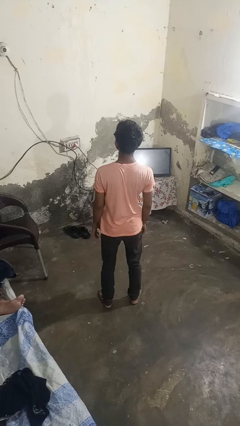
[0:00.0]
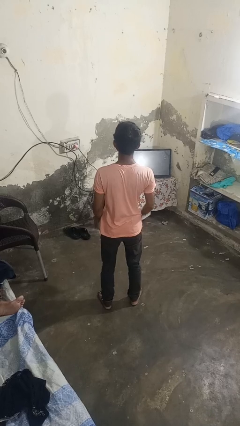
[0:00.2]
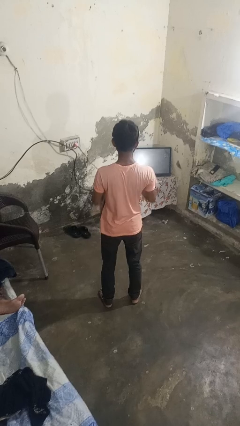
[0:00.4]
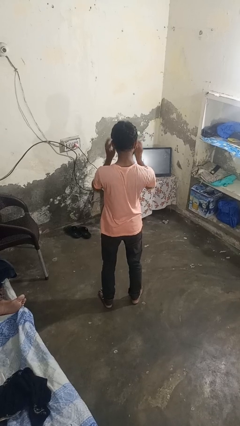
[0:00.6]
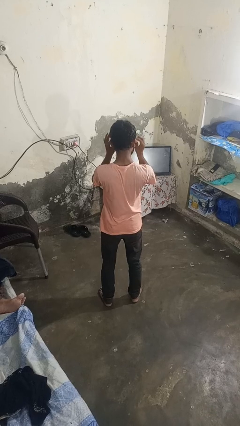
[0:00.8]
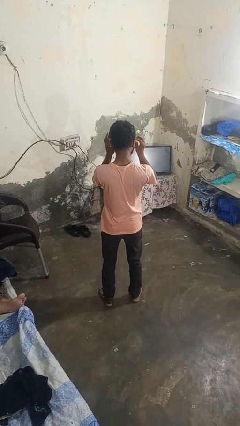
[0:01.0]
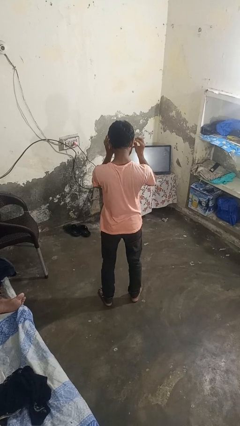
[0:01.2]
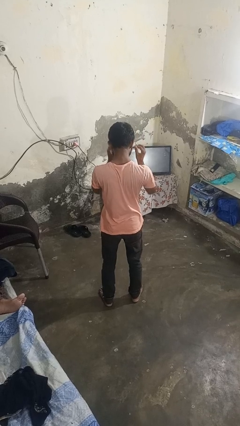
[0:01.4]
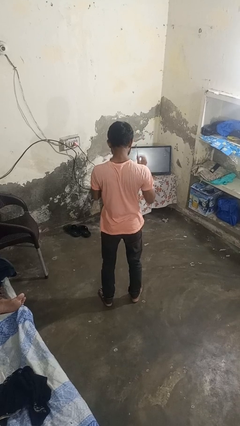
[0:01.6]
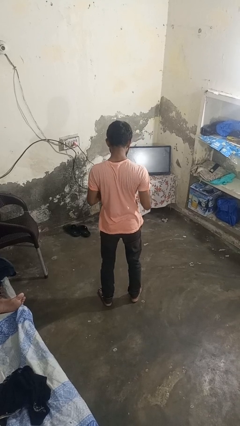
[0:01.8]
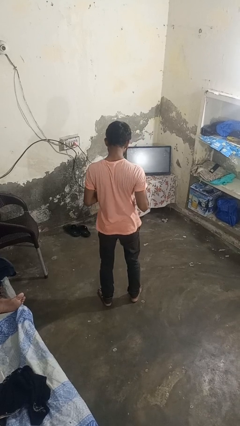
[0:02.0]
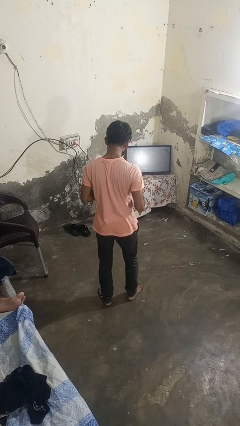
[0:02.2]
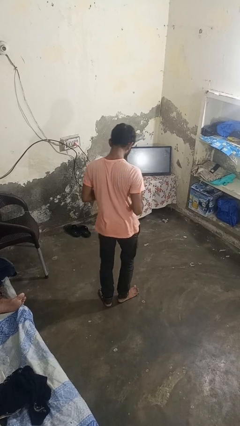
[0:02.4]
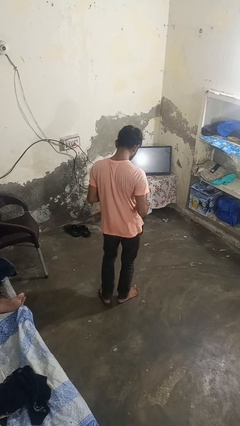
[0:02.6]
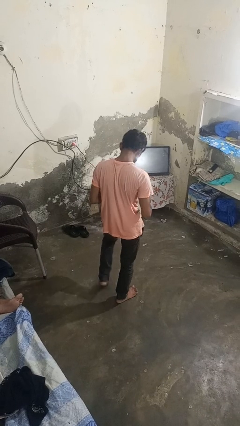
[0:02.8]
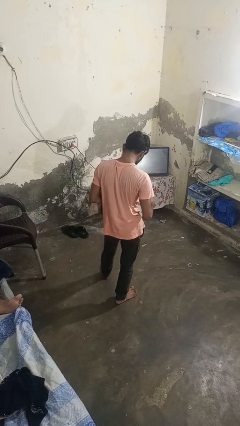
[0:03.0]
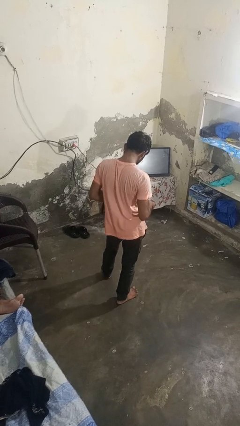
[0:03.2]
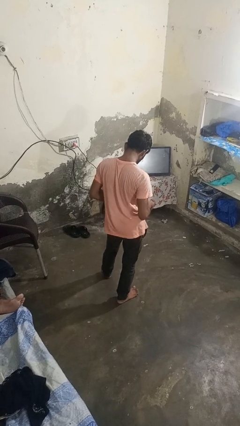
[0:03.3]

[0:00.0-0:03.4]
person takes off glasses

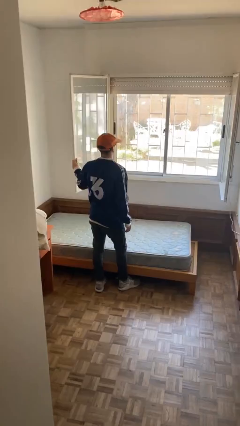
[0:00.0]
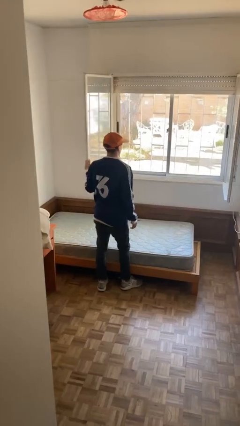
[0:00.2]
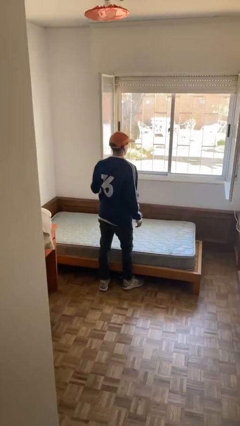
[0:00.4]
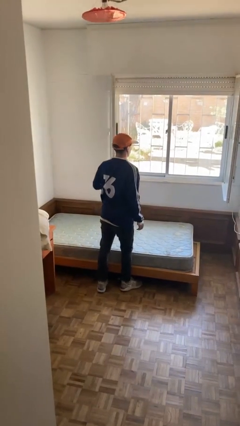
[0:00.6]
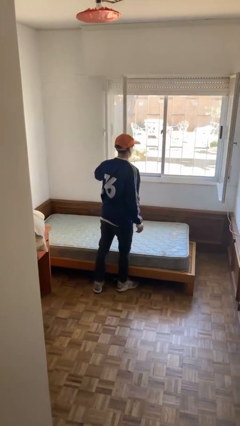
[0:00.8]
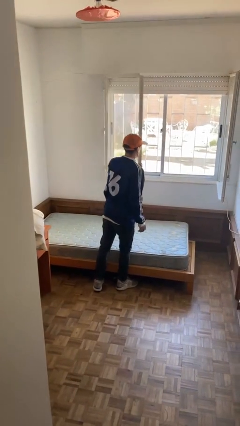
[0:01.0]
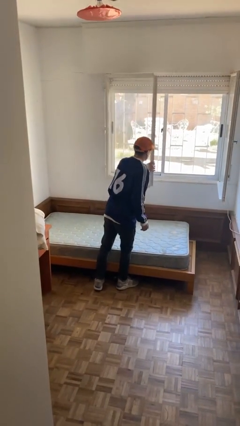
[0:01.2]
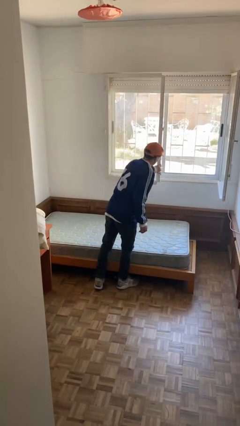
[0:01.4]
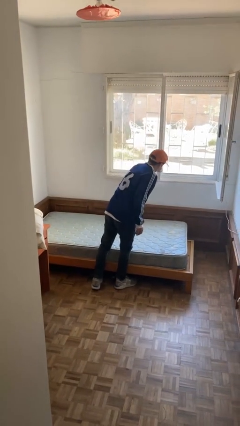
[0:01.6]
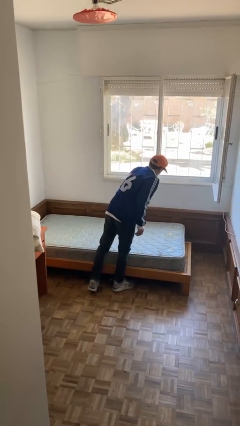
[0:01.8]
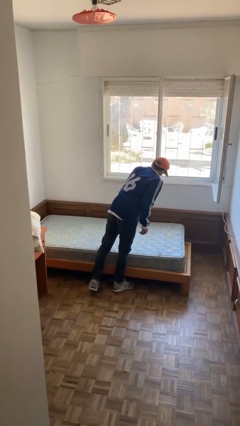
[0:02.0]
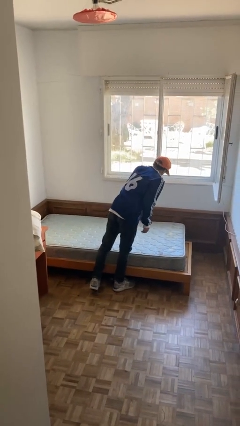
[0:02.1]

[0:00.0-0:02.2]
person closes home window

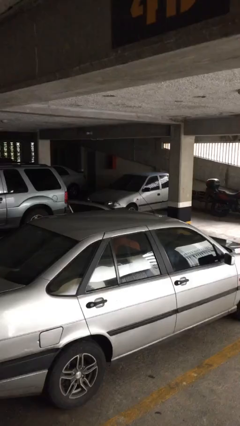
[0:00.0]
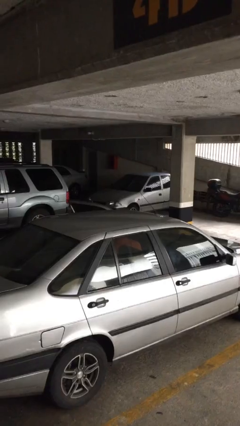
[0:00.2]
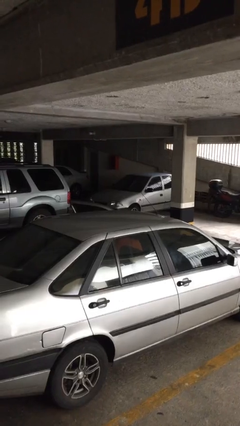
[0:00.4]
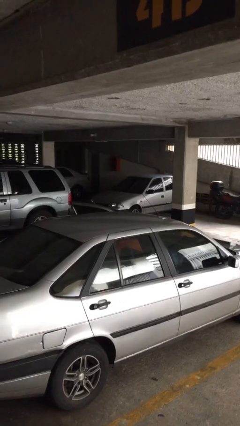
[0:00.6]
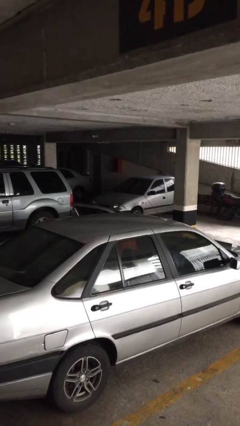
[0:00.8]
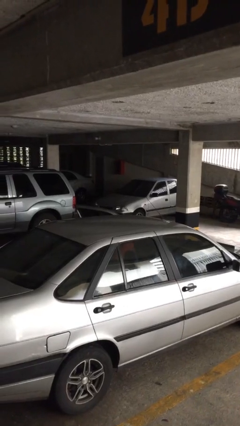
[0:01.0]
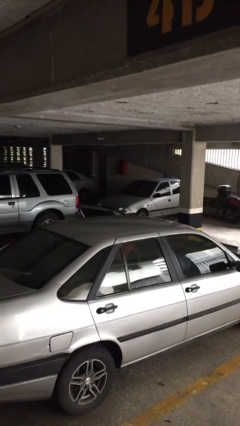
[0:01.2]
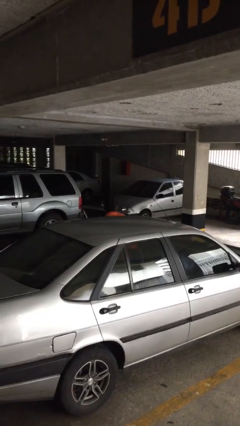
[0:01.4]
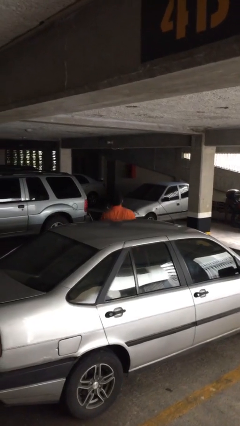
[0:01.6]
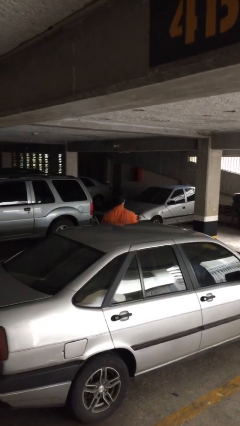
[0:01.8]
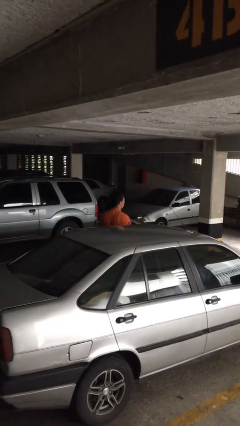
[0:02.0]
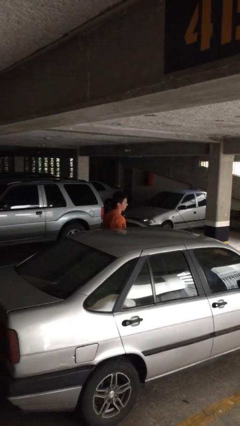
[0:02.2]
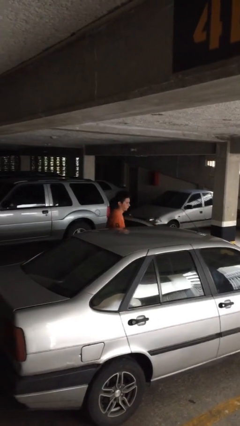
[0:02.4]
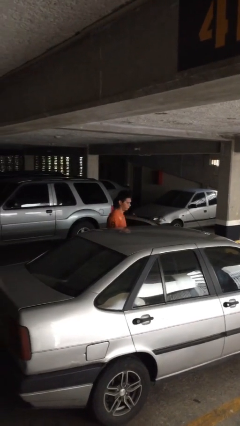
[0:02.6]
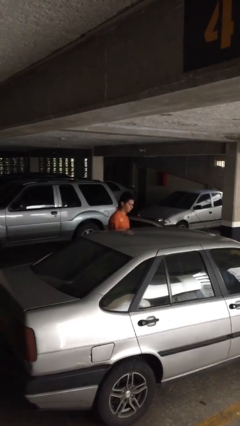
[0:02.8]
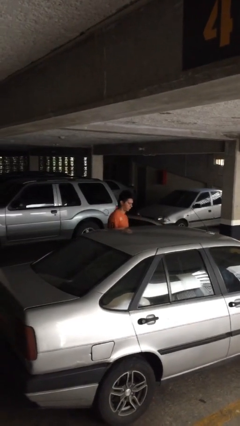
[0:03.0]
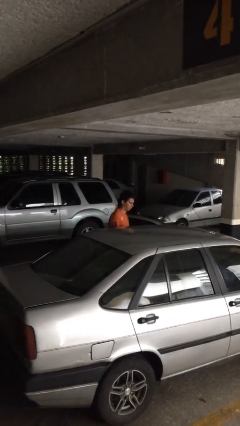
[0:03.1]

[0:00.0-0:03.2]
person exits scene through structure

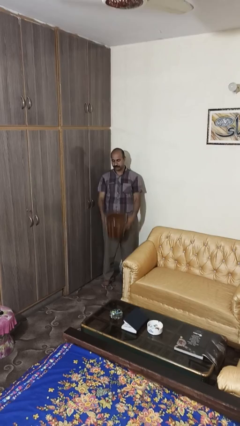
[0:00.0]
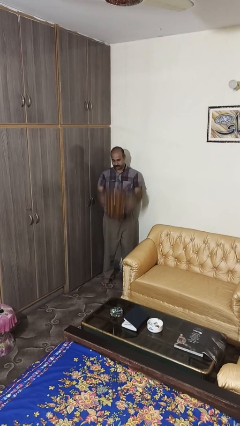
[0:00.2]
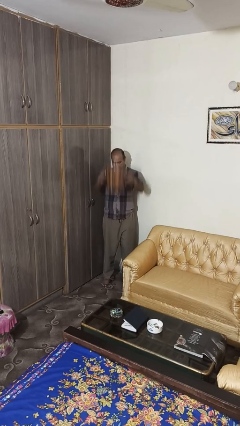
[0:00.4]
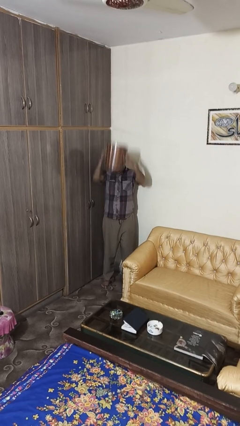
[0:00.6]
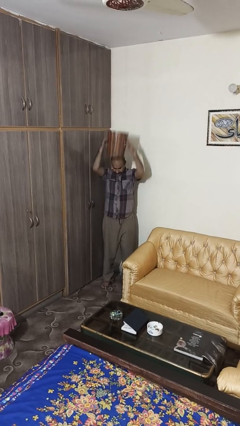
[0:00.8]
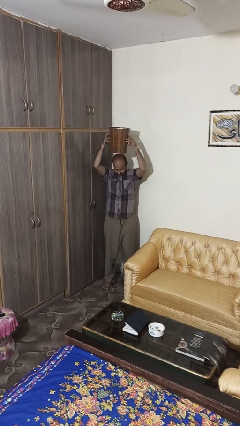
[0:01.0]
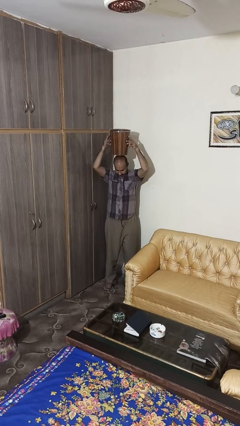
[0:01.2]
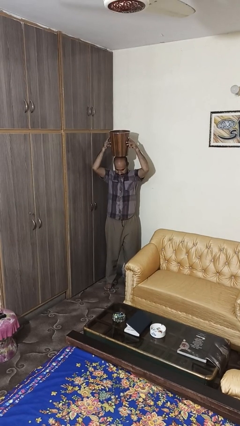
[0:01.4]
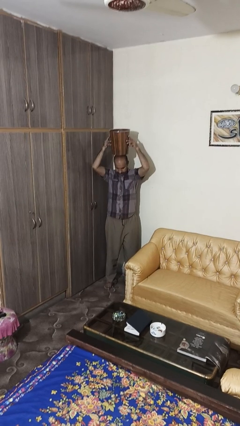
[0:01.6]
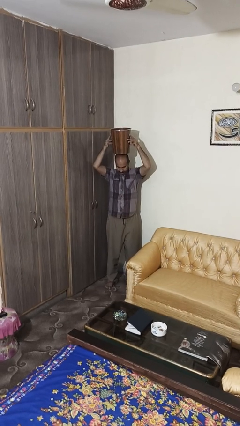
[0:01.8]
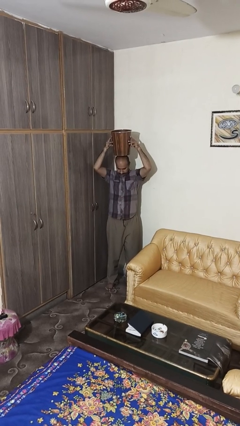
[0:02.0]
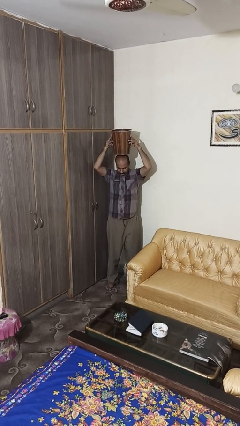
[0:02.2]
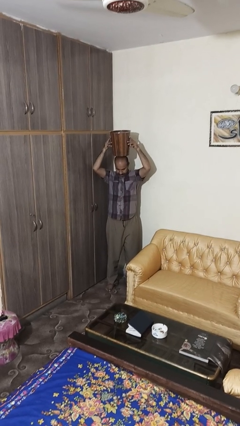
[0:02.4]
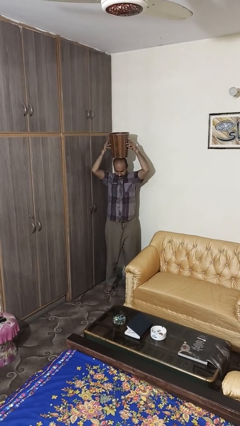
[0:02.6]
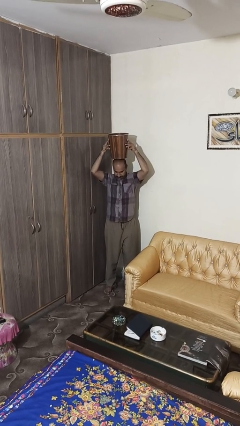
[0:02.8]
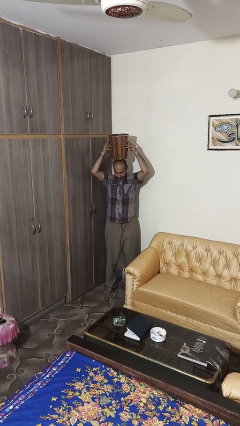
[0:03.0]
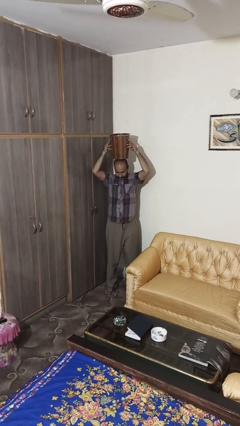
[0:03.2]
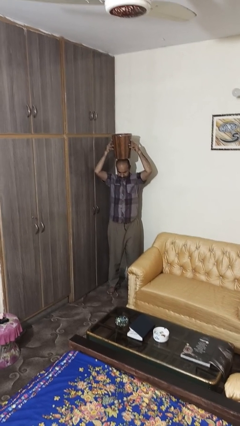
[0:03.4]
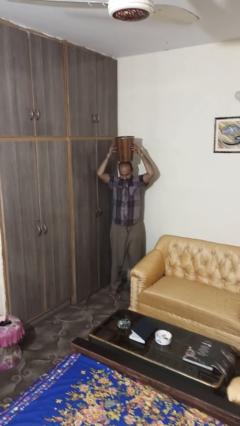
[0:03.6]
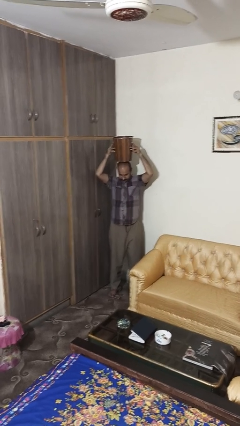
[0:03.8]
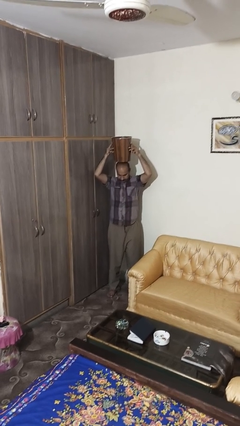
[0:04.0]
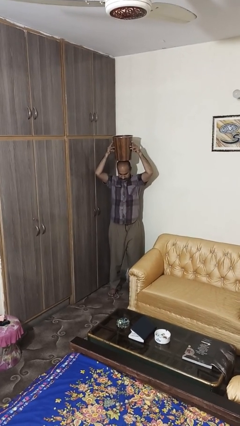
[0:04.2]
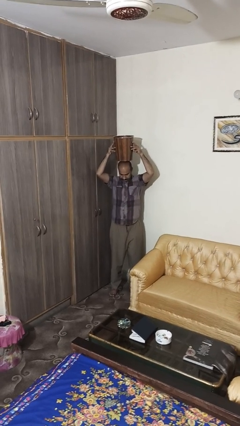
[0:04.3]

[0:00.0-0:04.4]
person holds object above head

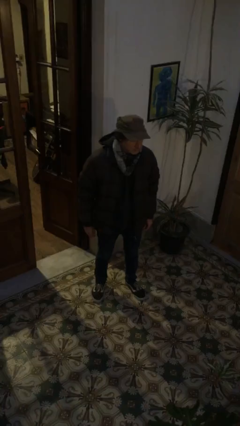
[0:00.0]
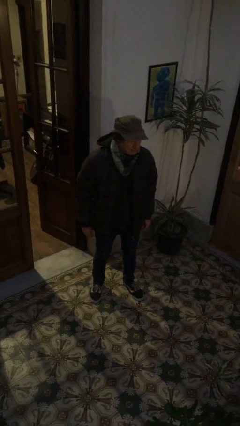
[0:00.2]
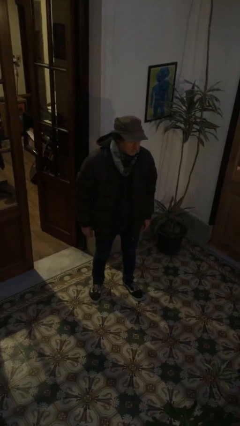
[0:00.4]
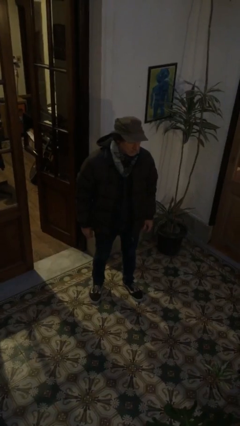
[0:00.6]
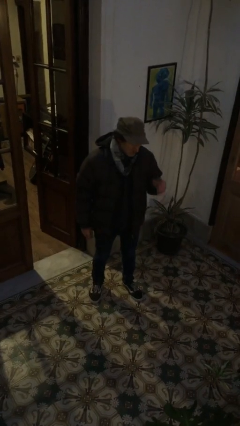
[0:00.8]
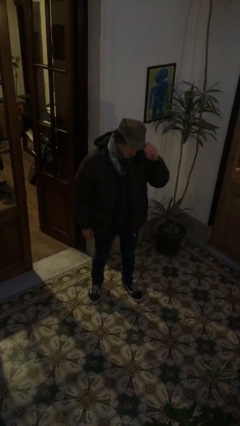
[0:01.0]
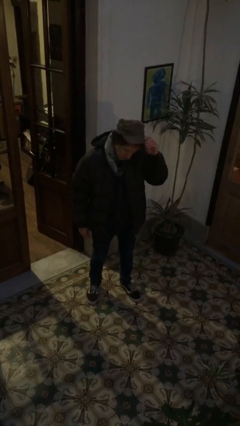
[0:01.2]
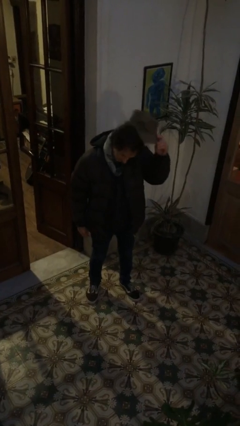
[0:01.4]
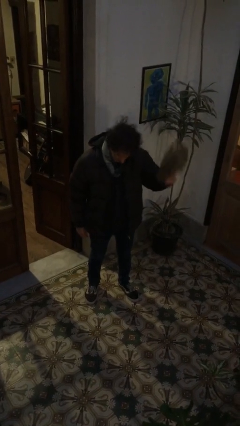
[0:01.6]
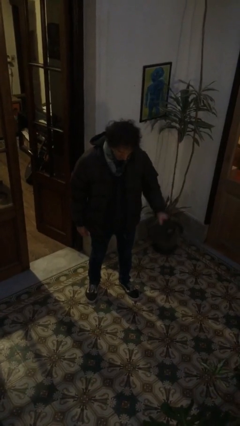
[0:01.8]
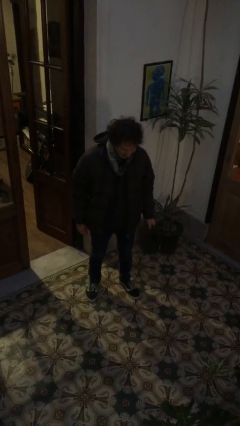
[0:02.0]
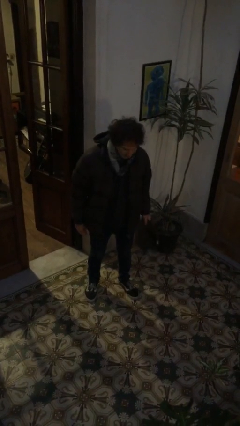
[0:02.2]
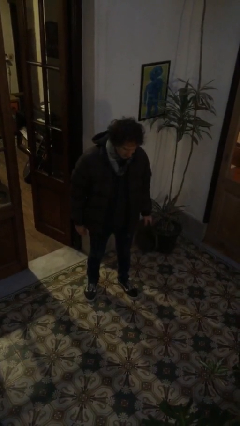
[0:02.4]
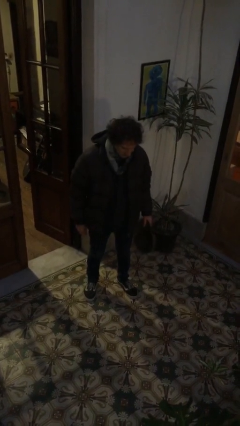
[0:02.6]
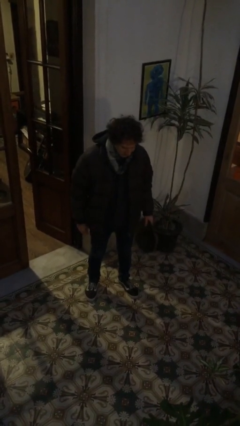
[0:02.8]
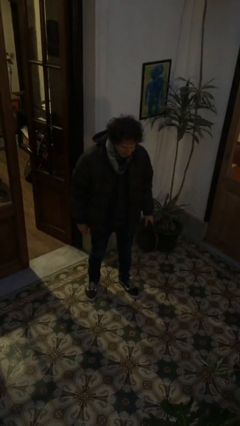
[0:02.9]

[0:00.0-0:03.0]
person takes off hat

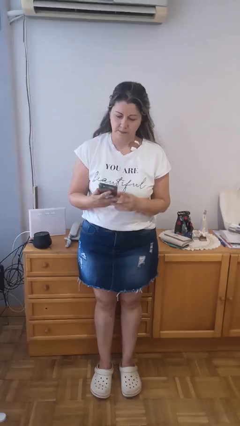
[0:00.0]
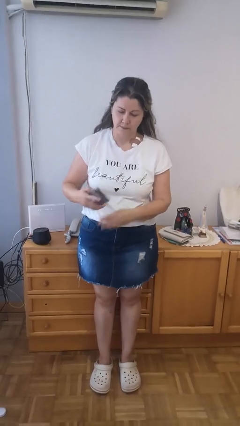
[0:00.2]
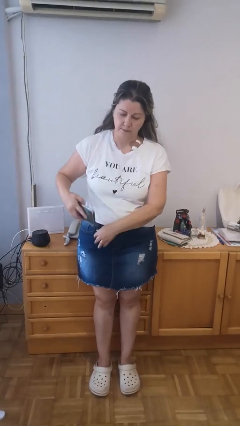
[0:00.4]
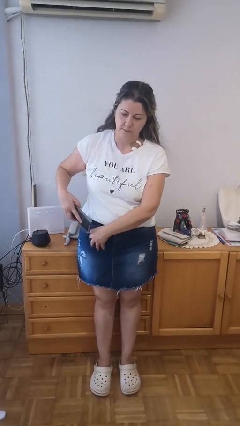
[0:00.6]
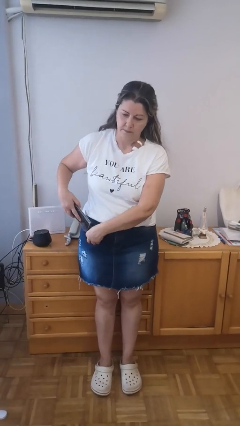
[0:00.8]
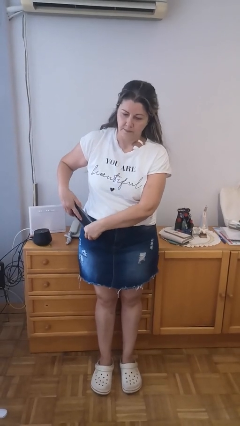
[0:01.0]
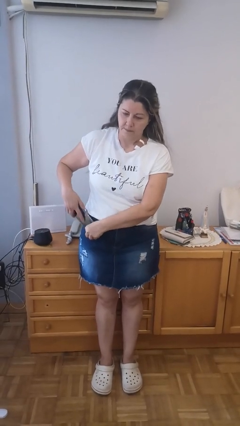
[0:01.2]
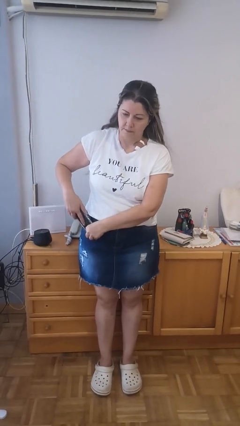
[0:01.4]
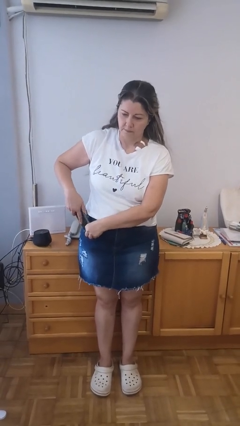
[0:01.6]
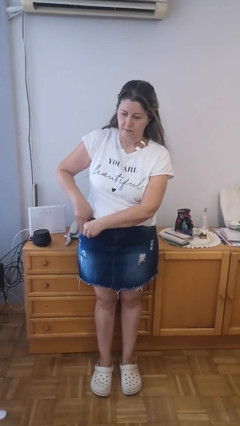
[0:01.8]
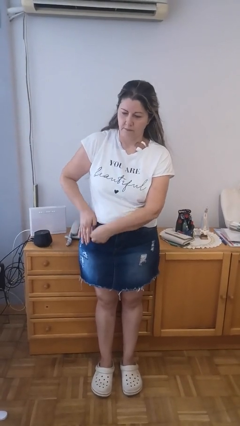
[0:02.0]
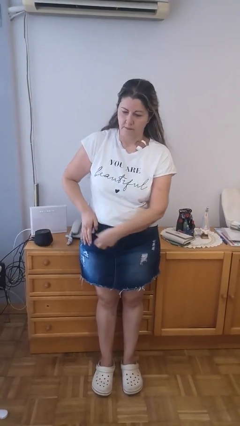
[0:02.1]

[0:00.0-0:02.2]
person puts phone into pocket
